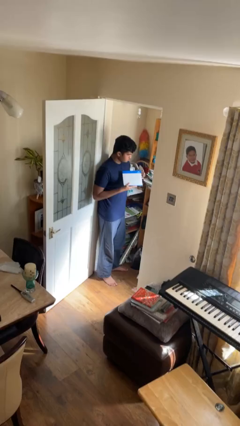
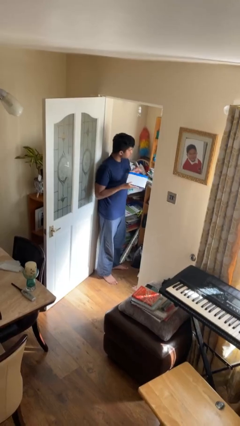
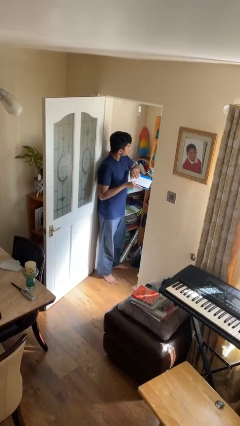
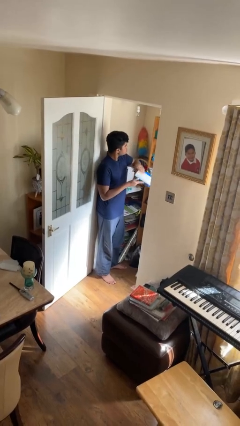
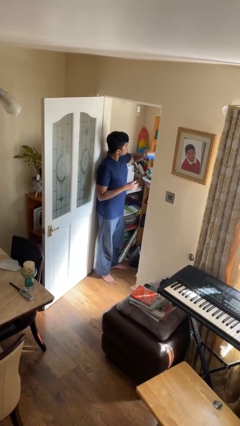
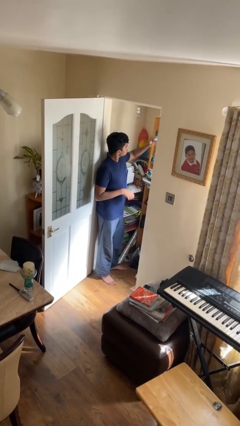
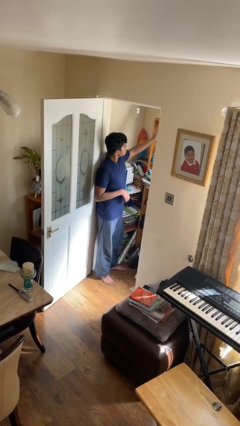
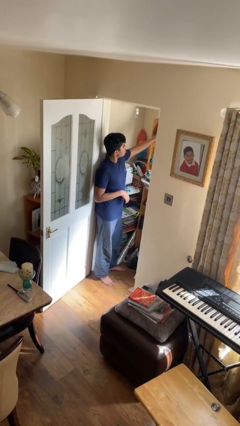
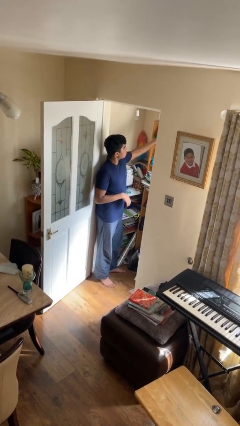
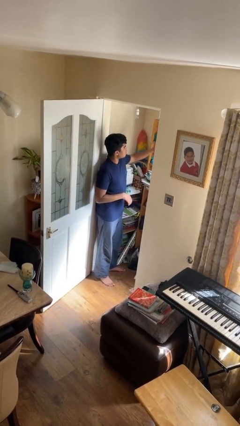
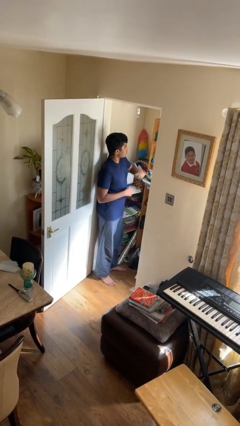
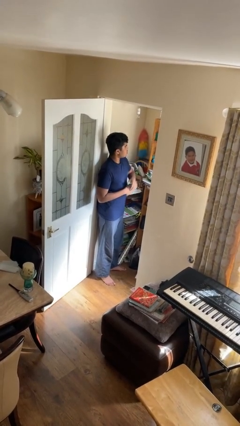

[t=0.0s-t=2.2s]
person puts down object on shelf

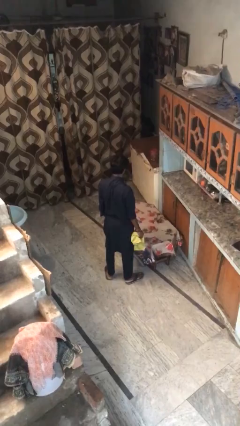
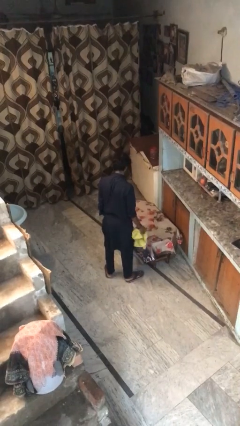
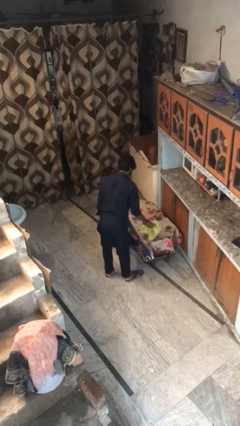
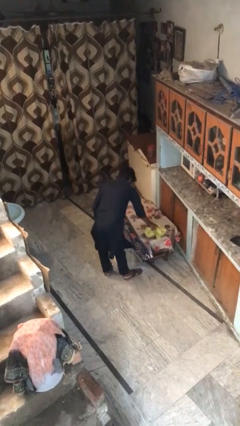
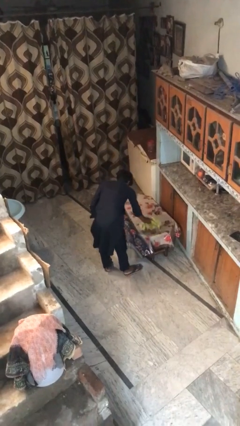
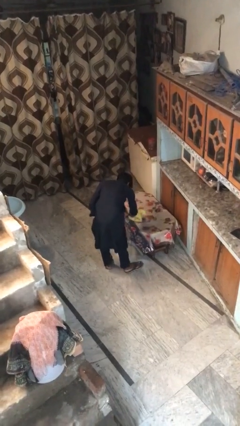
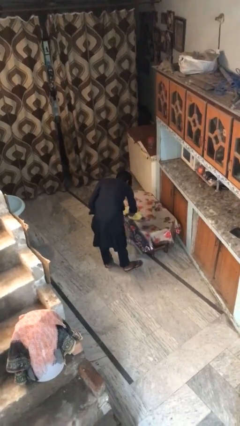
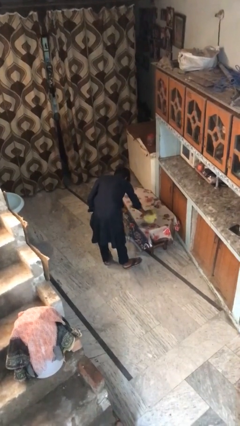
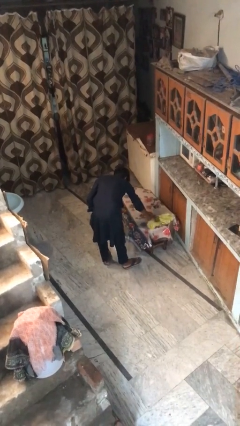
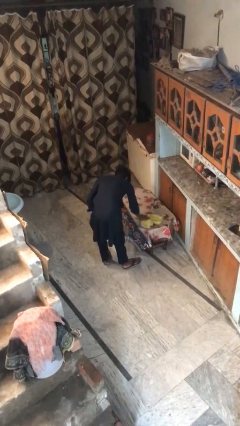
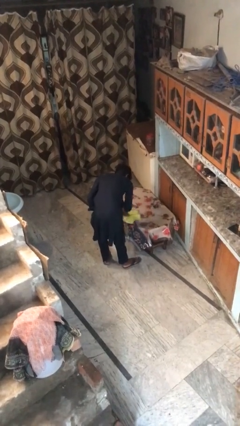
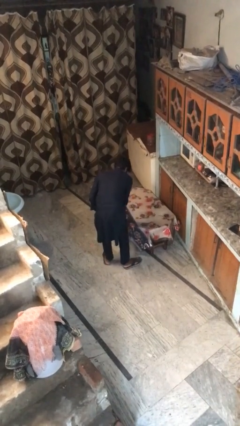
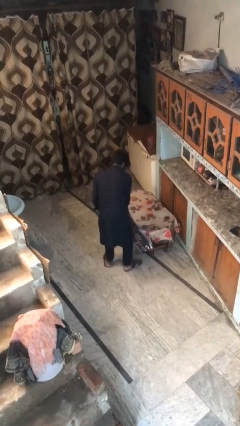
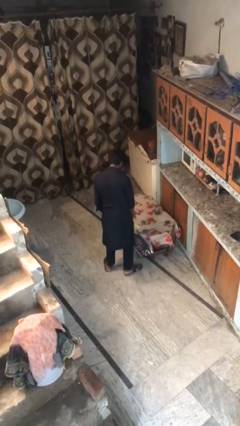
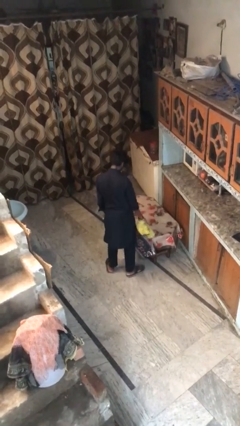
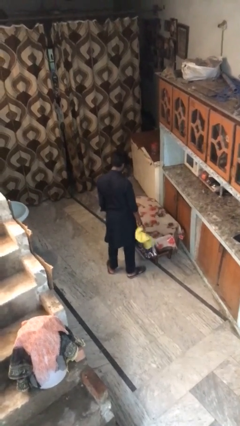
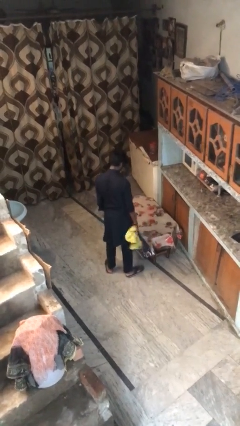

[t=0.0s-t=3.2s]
person cleans table with rag

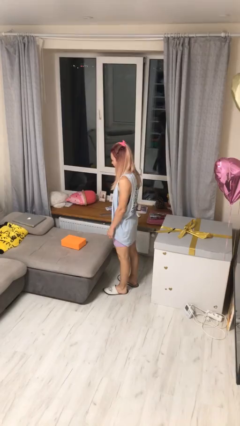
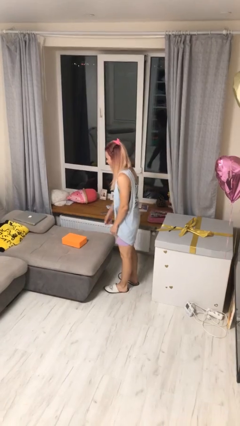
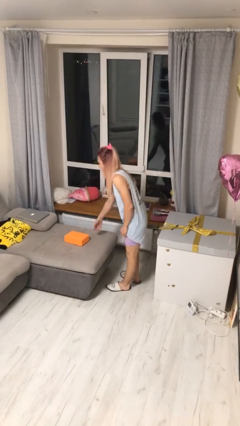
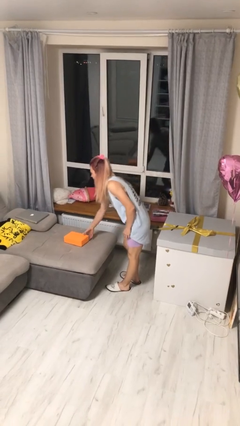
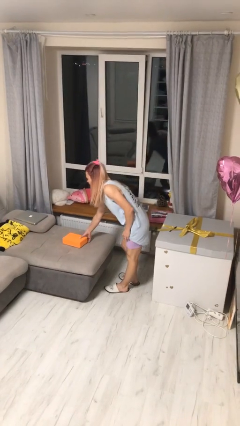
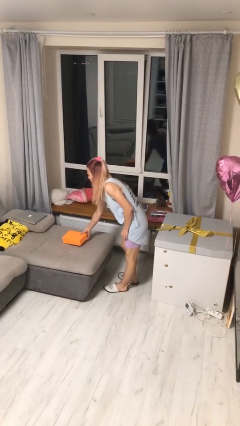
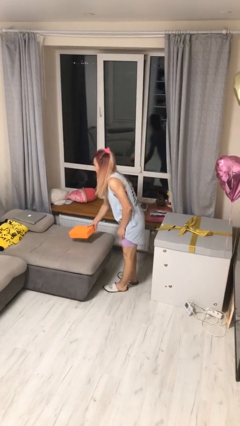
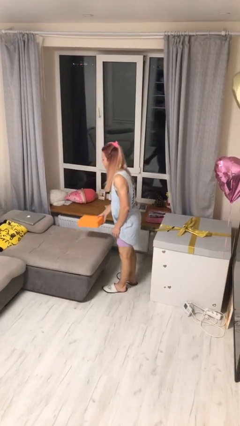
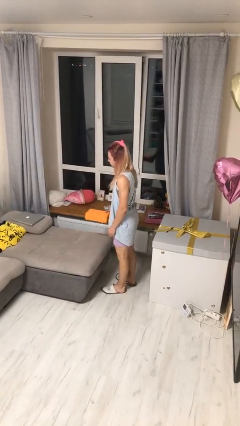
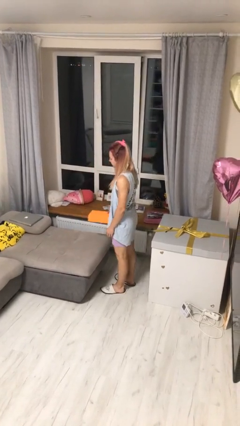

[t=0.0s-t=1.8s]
person picks up object from couch

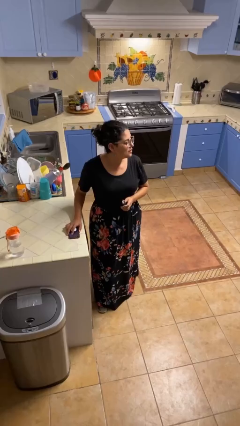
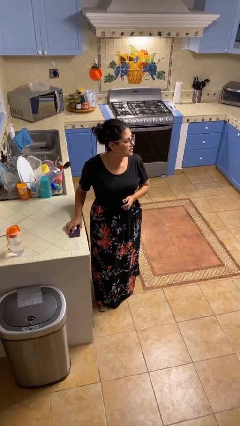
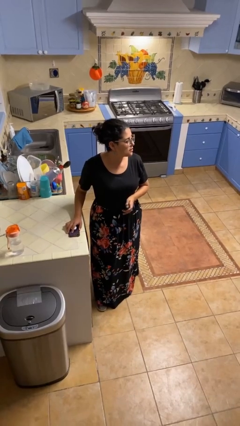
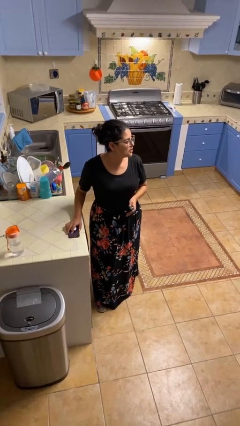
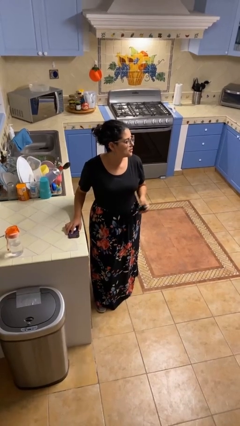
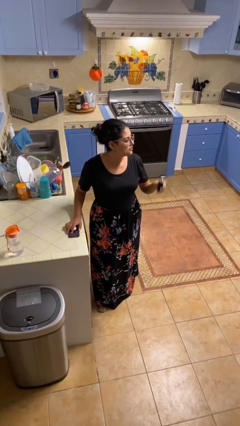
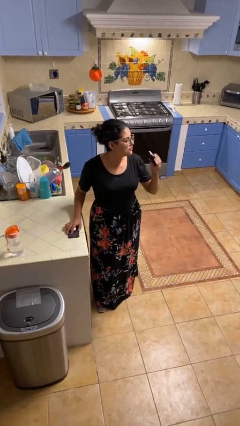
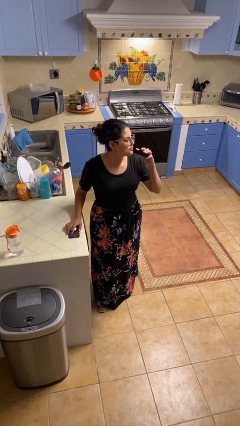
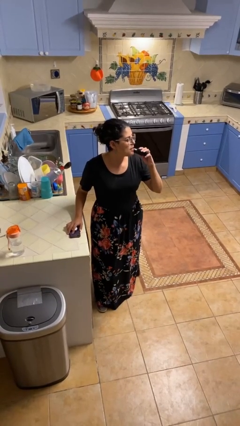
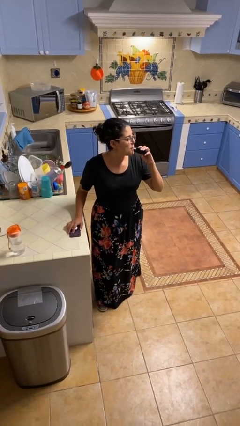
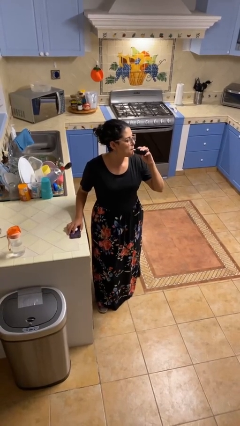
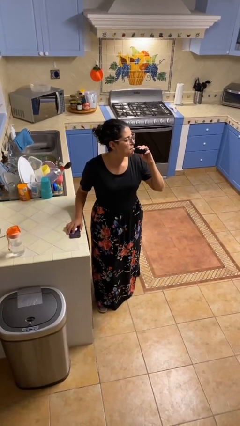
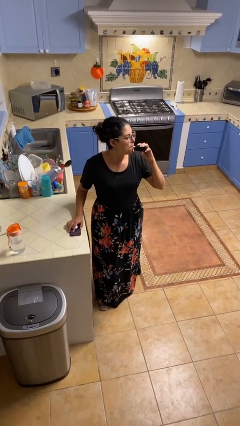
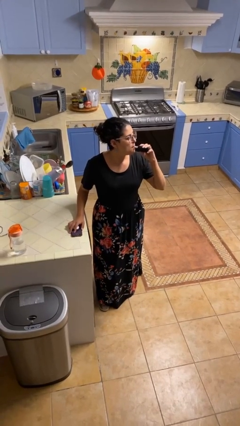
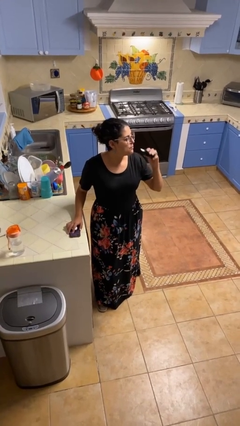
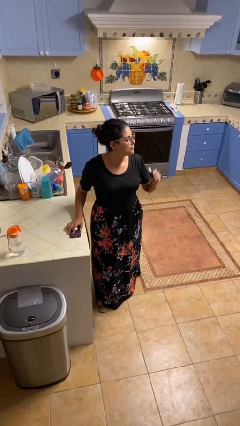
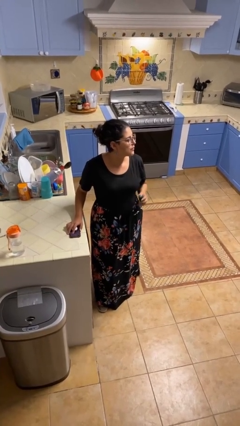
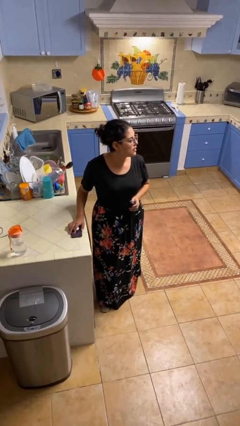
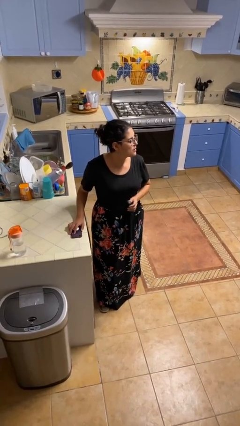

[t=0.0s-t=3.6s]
person vapes

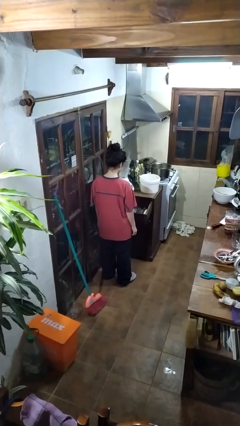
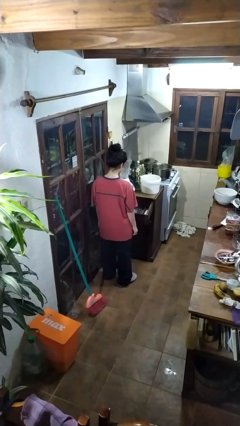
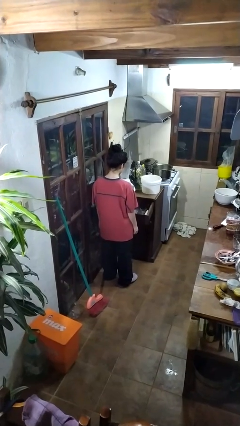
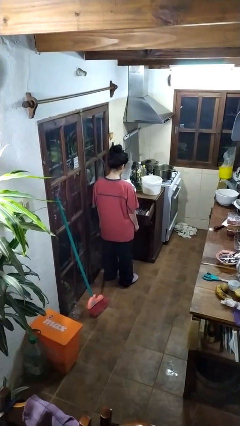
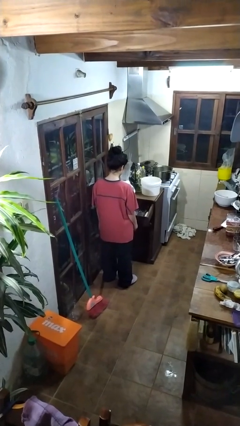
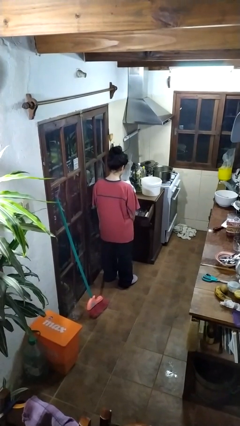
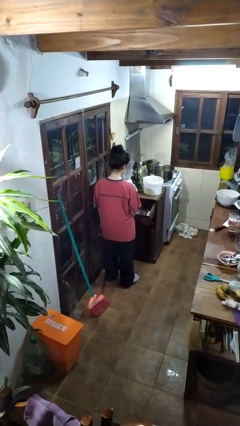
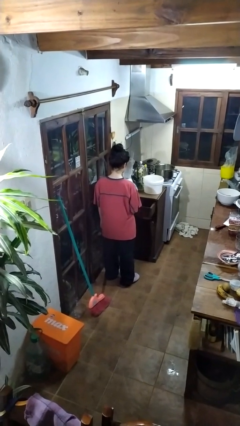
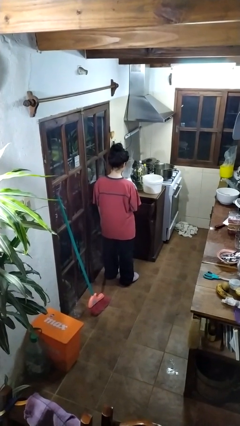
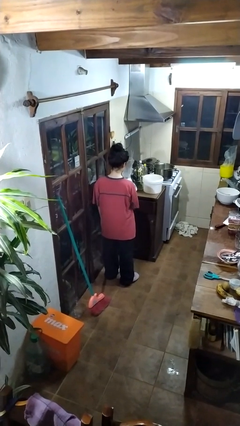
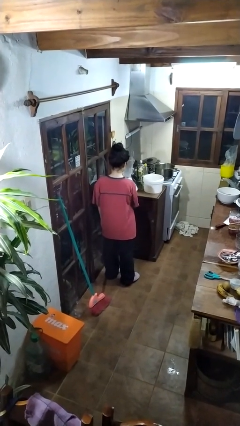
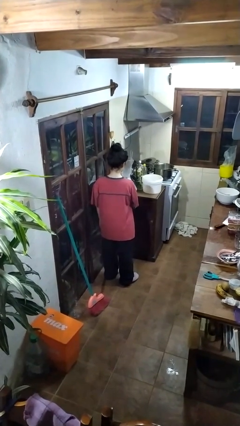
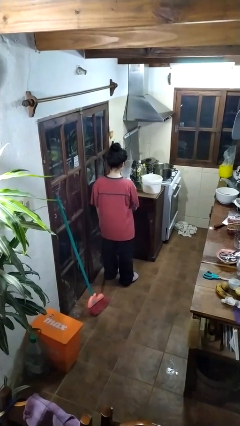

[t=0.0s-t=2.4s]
person closes kitchen drawer

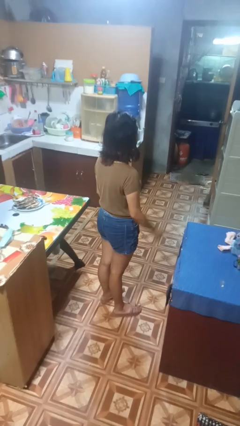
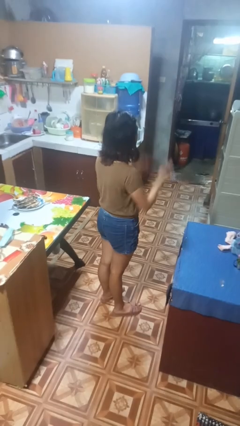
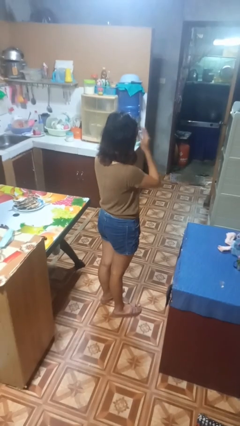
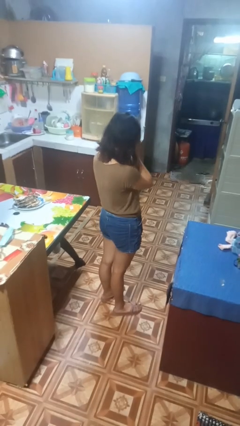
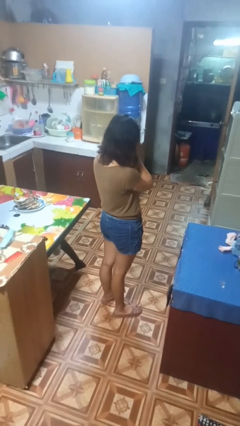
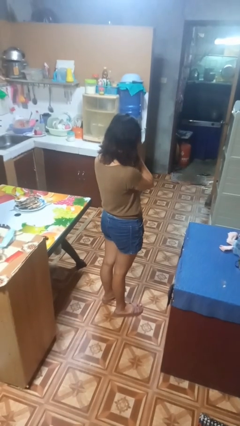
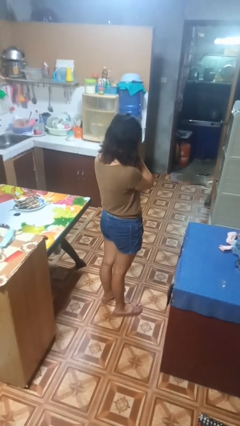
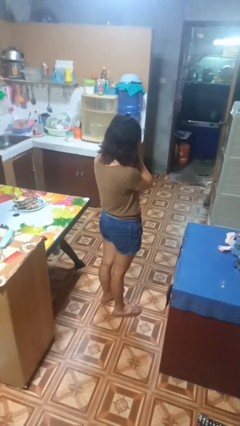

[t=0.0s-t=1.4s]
person covers face with hands

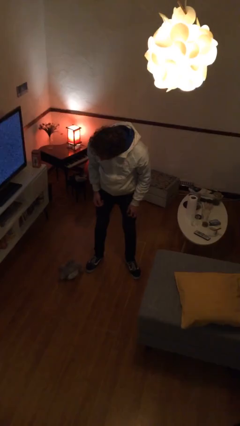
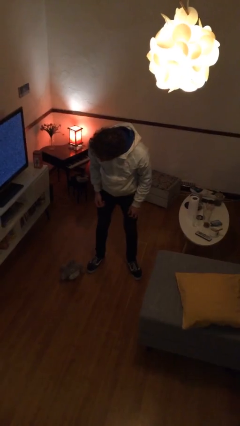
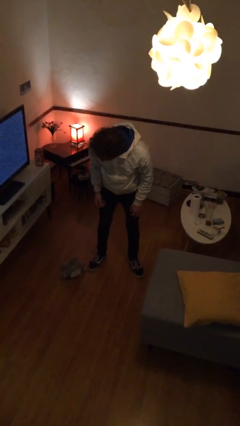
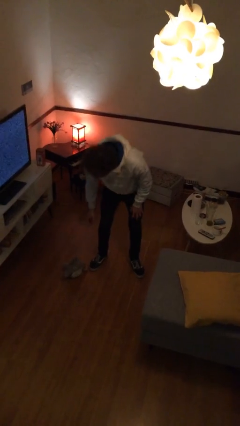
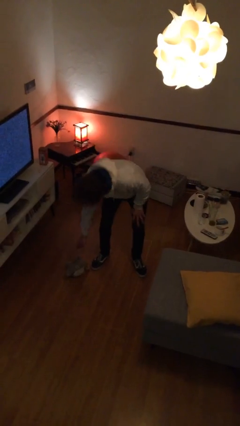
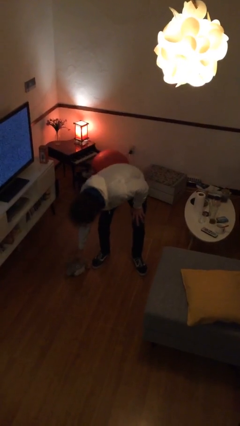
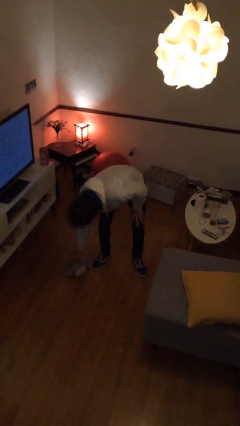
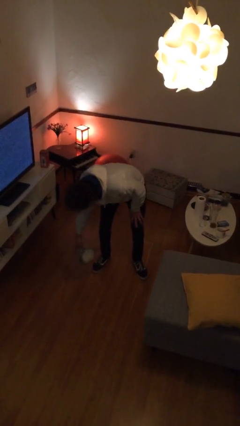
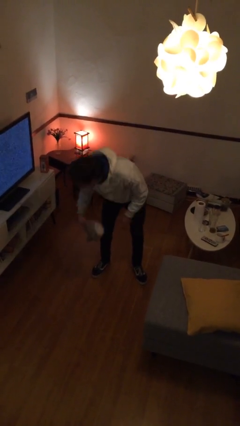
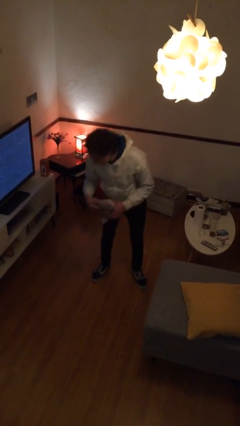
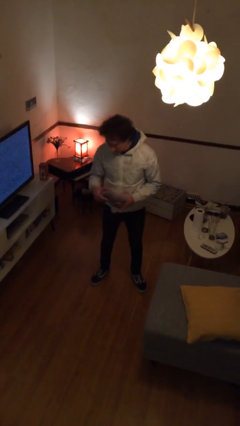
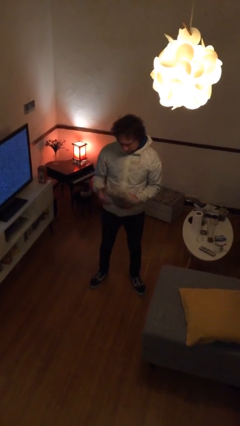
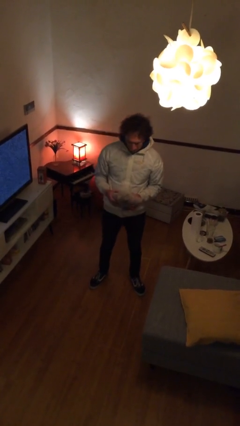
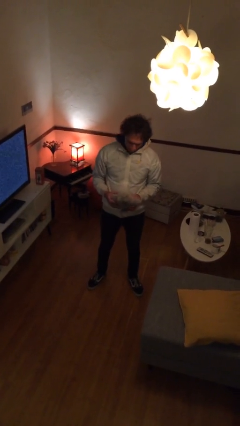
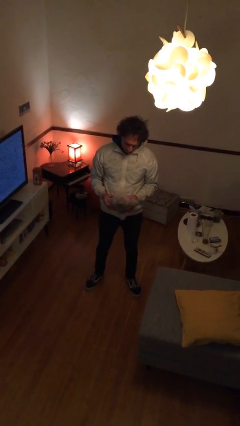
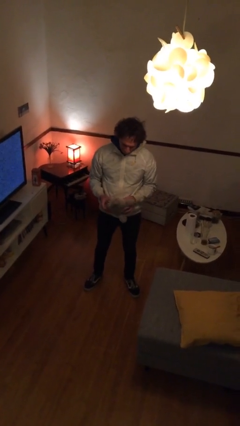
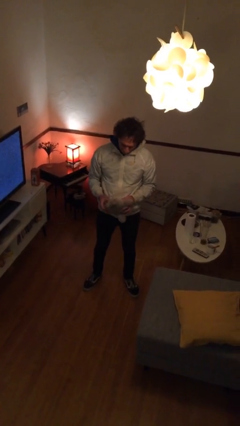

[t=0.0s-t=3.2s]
person picks up object from floor
